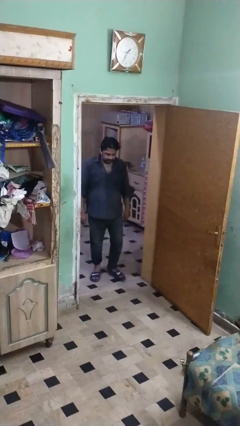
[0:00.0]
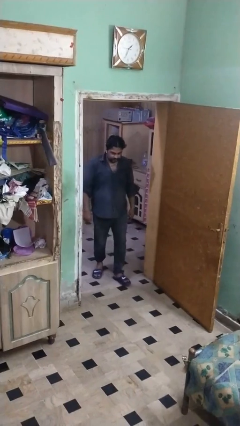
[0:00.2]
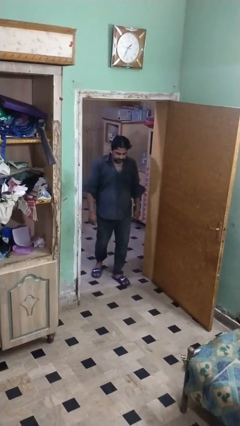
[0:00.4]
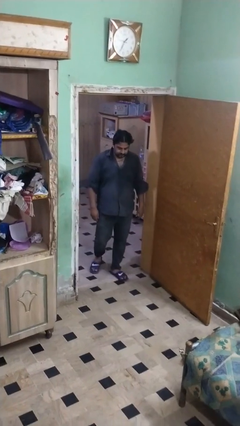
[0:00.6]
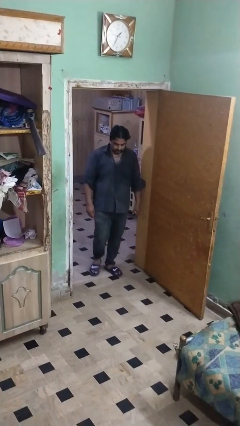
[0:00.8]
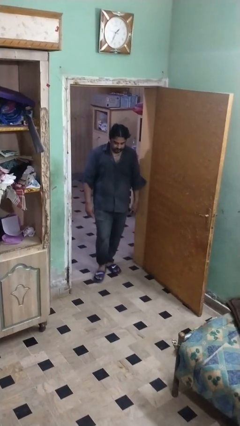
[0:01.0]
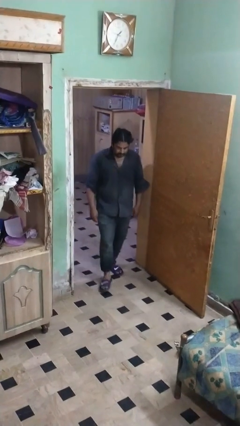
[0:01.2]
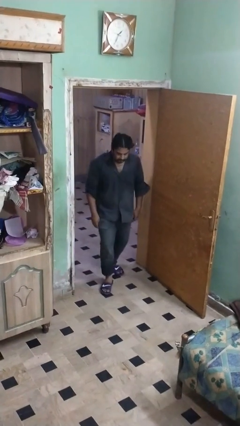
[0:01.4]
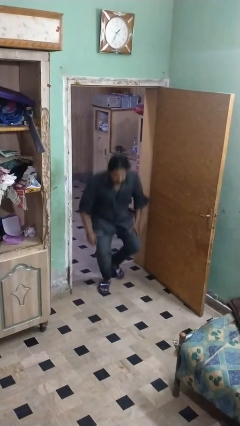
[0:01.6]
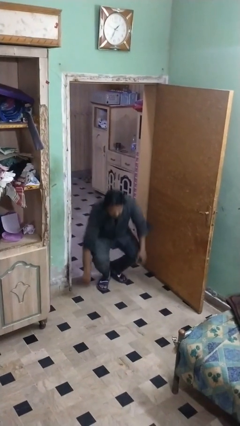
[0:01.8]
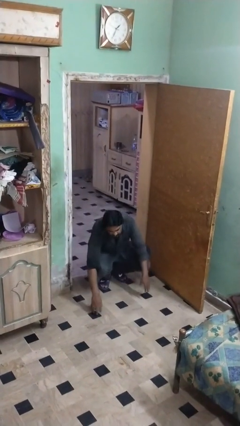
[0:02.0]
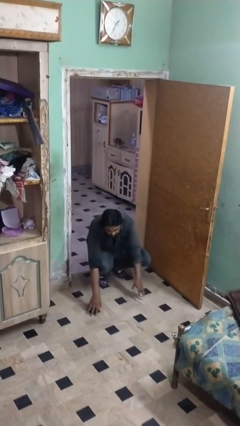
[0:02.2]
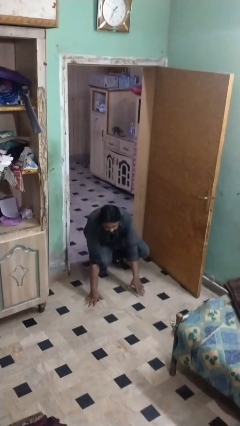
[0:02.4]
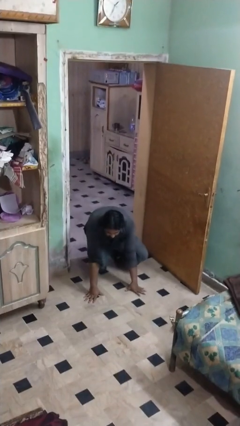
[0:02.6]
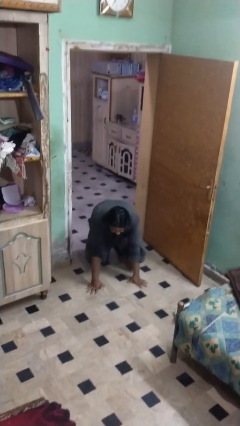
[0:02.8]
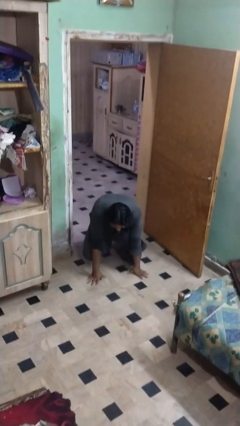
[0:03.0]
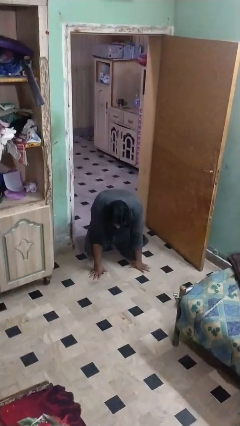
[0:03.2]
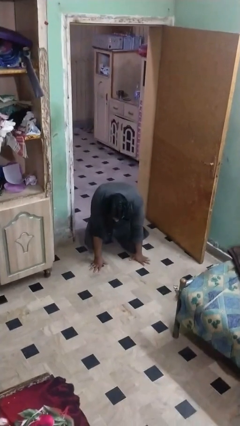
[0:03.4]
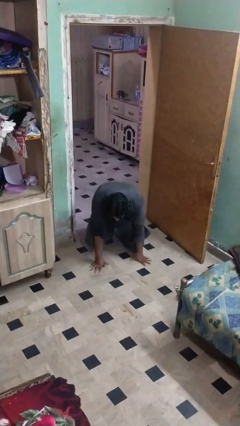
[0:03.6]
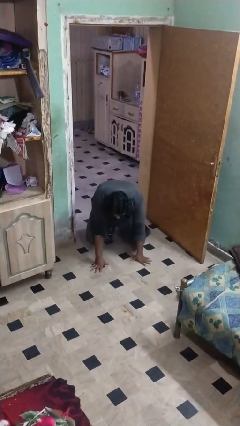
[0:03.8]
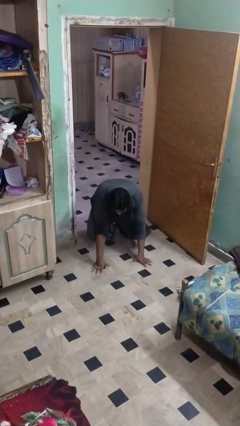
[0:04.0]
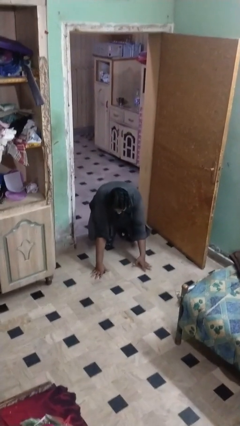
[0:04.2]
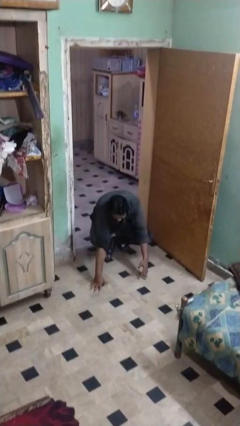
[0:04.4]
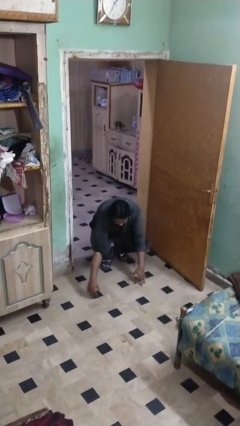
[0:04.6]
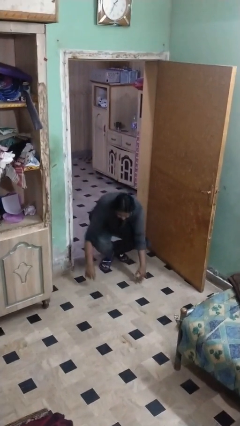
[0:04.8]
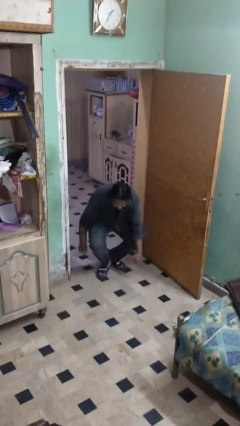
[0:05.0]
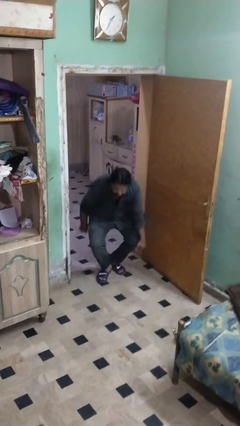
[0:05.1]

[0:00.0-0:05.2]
person trips on object on floor

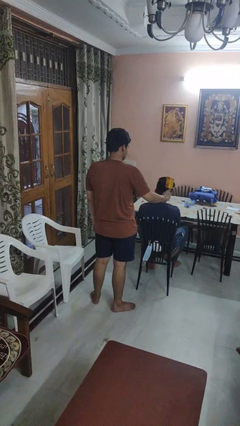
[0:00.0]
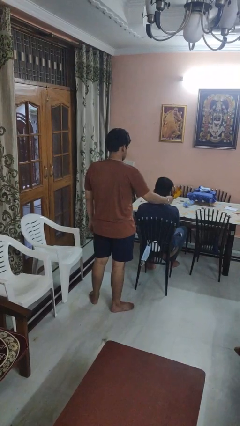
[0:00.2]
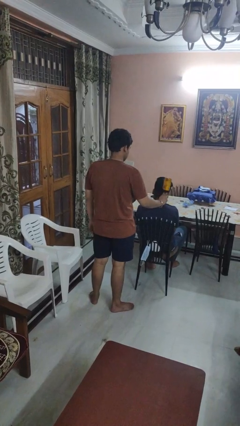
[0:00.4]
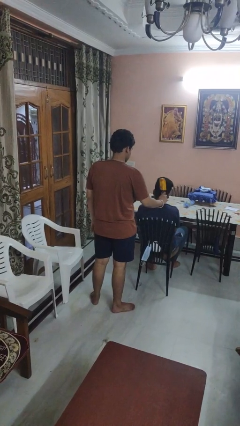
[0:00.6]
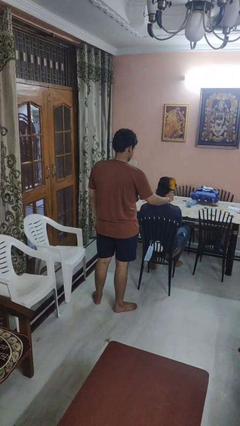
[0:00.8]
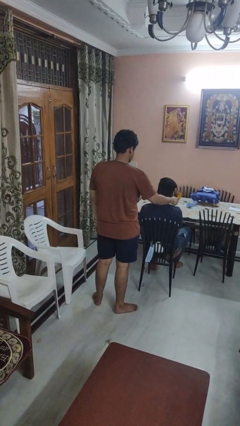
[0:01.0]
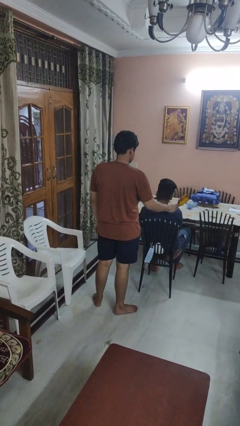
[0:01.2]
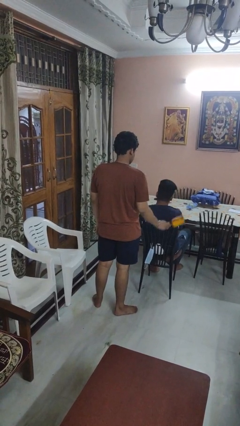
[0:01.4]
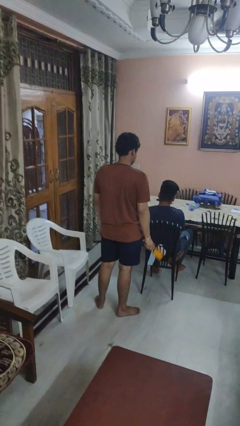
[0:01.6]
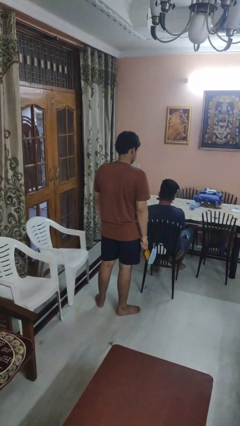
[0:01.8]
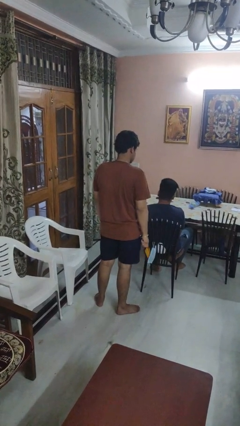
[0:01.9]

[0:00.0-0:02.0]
person brushes hair of person

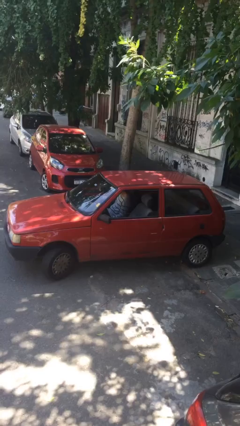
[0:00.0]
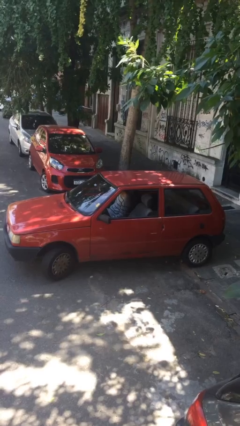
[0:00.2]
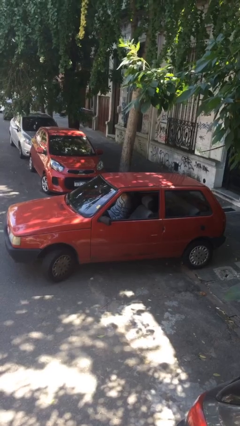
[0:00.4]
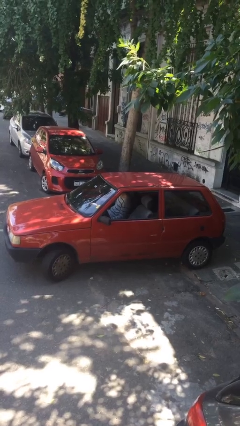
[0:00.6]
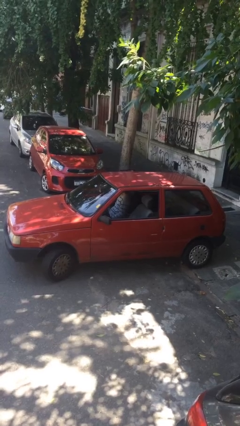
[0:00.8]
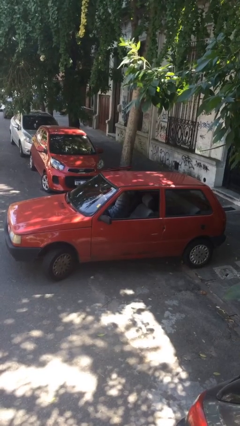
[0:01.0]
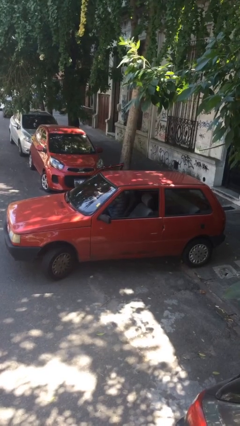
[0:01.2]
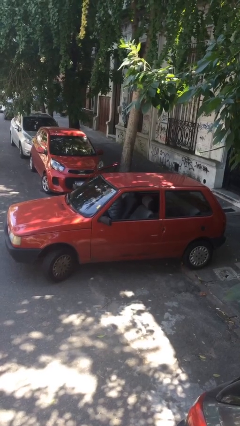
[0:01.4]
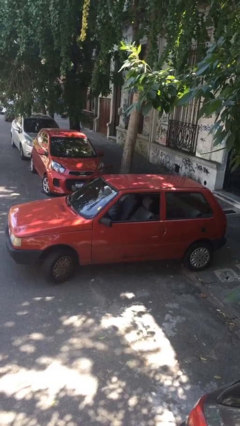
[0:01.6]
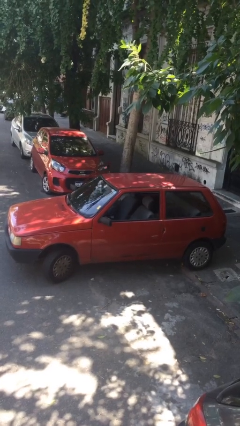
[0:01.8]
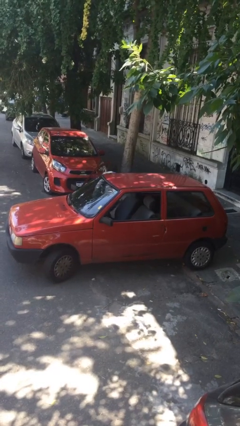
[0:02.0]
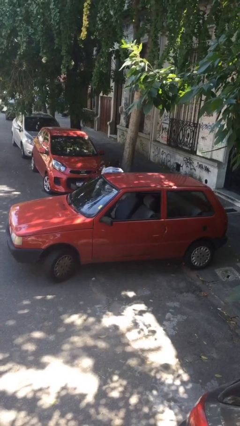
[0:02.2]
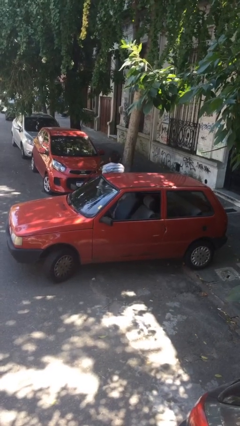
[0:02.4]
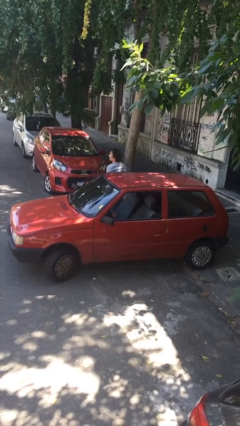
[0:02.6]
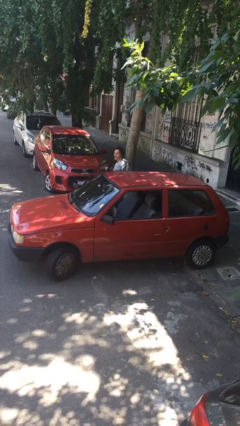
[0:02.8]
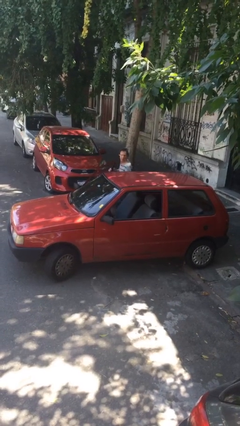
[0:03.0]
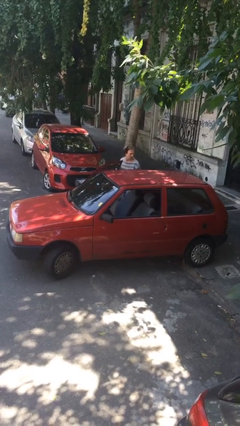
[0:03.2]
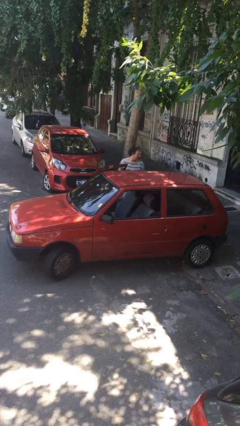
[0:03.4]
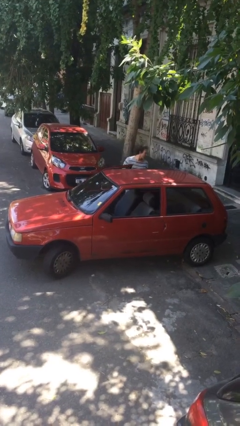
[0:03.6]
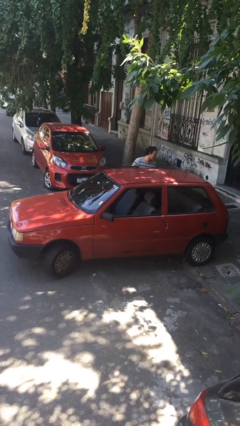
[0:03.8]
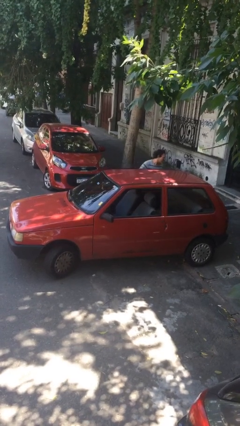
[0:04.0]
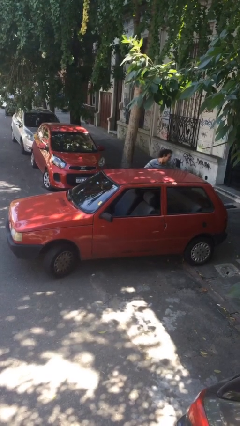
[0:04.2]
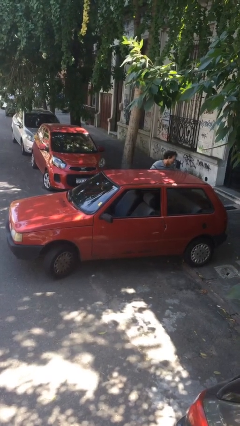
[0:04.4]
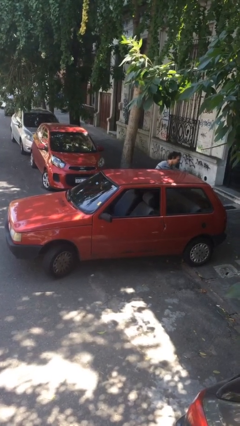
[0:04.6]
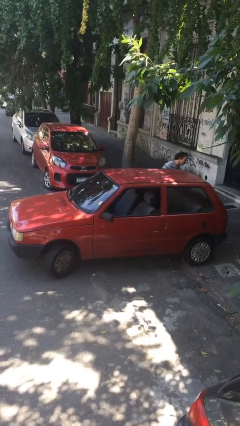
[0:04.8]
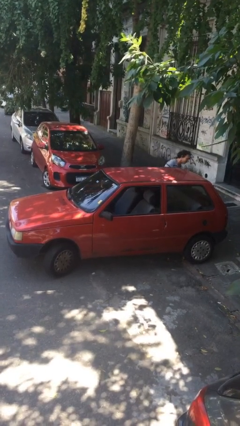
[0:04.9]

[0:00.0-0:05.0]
car drops off person

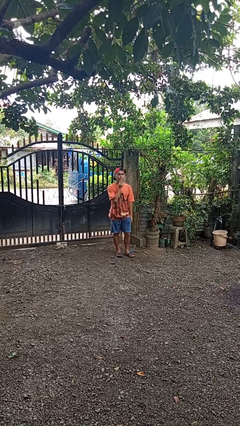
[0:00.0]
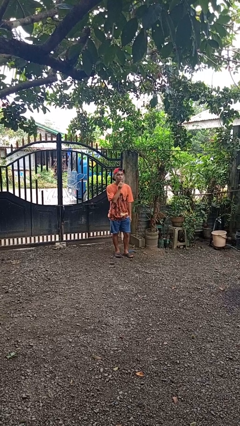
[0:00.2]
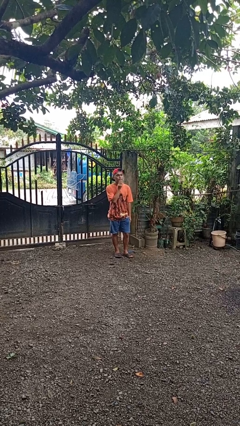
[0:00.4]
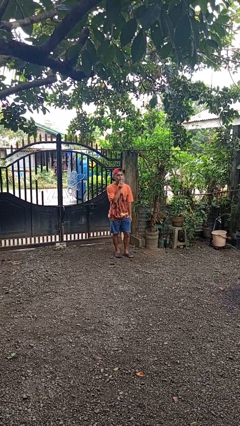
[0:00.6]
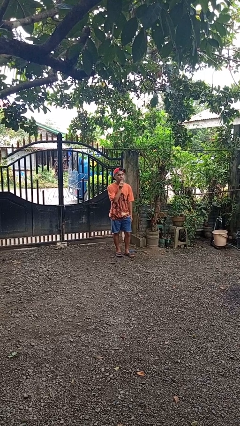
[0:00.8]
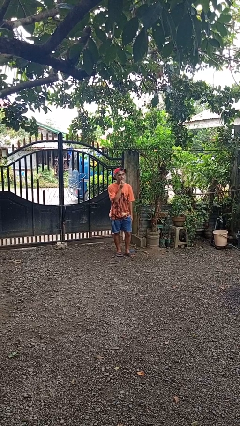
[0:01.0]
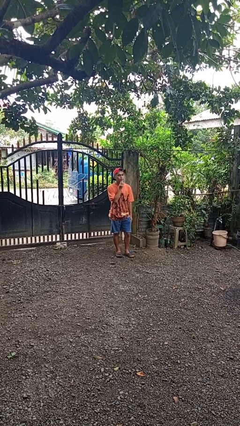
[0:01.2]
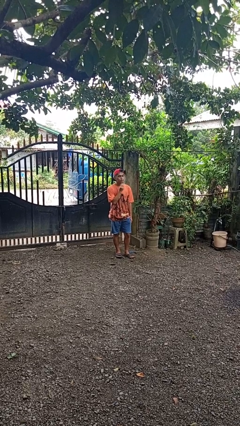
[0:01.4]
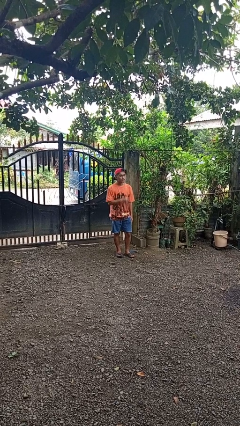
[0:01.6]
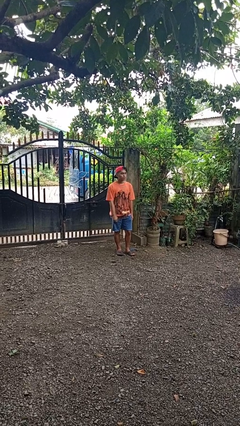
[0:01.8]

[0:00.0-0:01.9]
person strokes chin

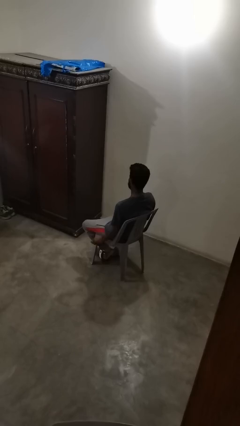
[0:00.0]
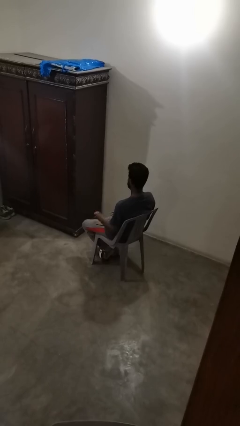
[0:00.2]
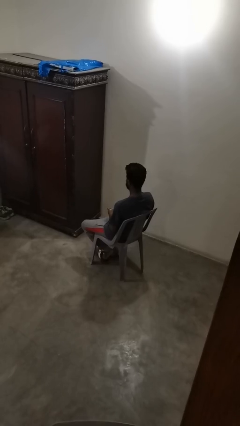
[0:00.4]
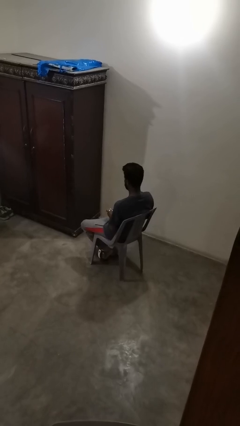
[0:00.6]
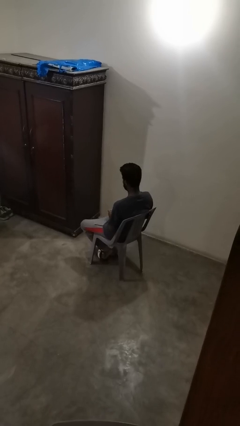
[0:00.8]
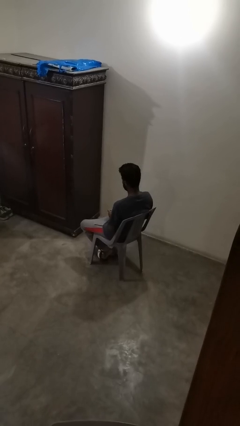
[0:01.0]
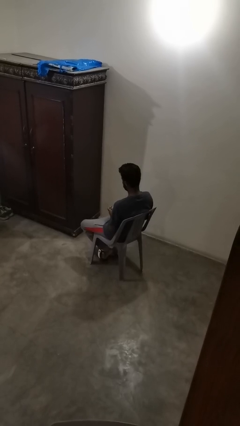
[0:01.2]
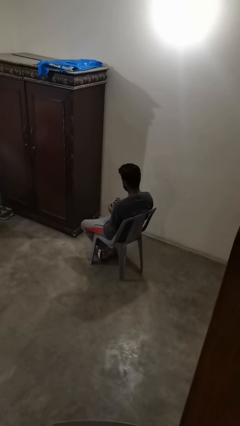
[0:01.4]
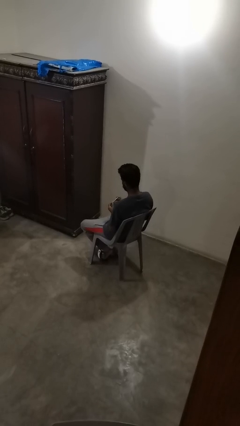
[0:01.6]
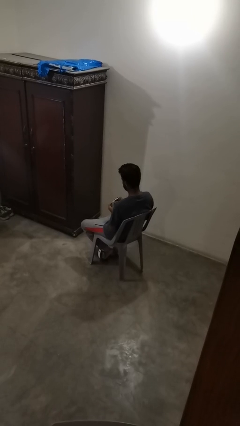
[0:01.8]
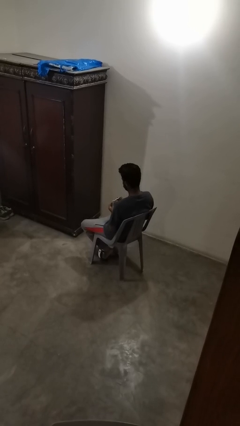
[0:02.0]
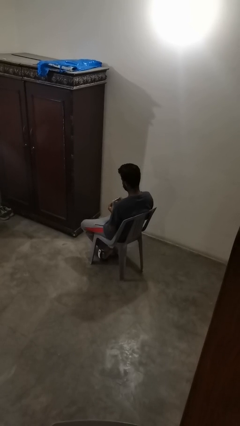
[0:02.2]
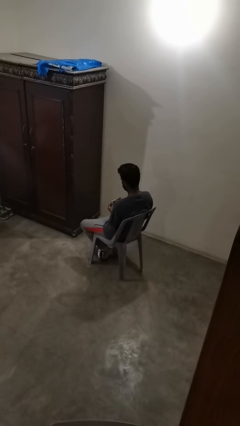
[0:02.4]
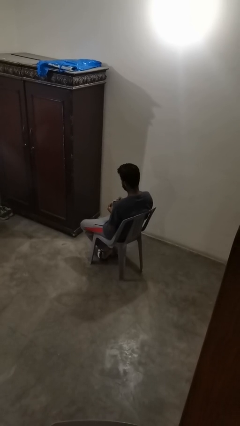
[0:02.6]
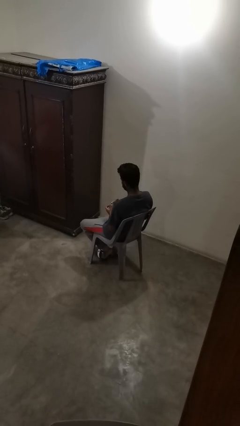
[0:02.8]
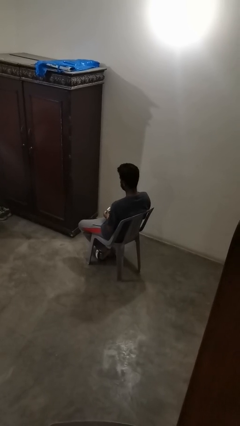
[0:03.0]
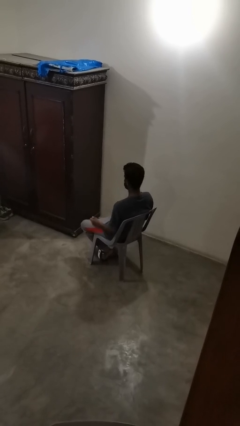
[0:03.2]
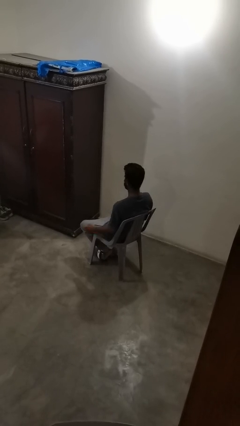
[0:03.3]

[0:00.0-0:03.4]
person clips fingernails
